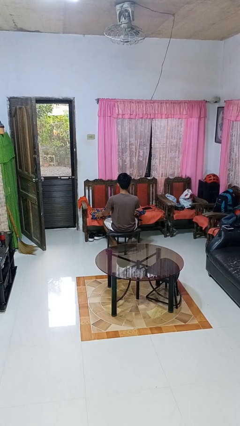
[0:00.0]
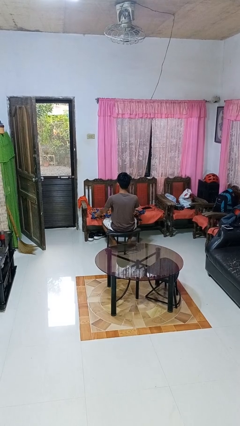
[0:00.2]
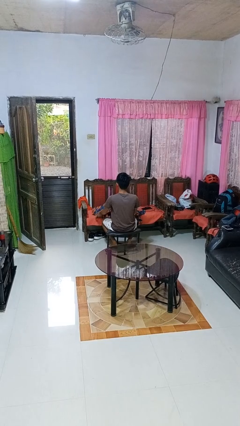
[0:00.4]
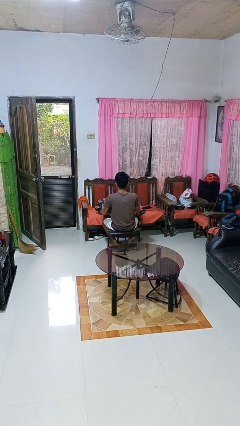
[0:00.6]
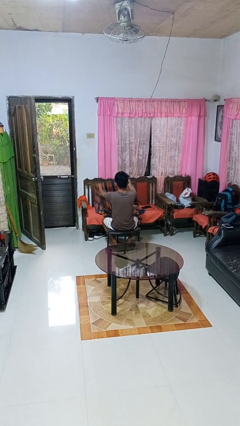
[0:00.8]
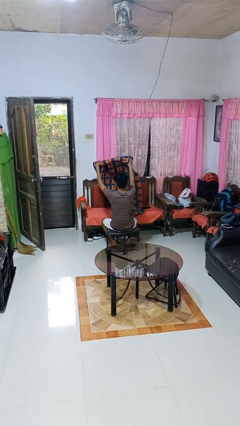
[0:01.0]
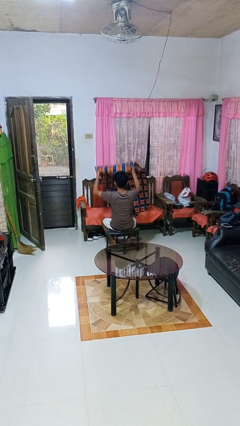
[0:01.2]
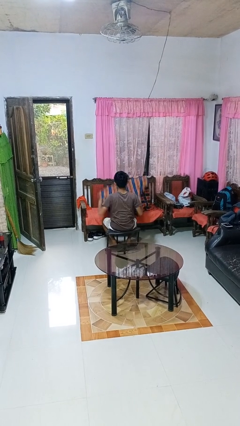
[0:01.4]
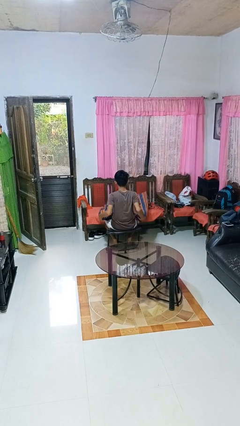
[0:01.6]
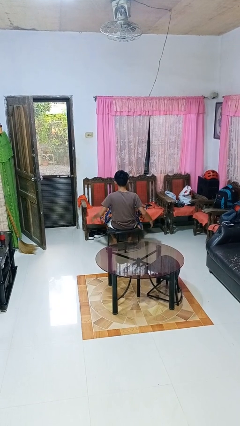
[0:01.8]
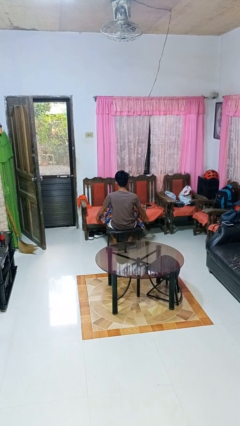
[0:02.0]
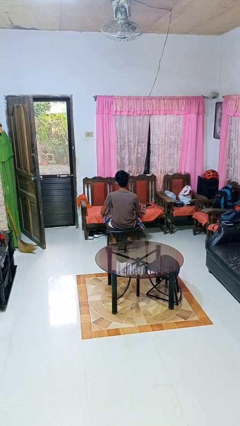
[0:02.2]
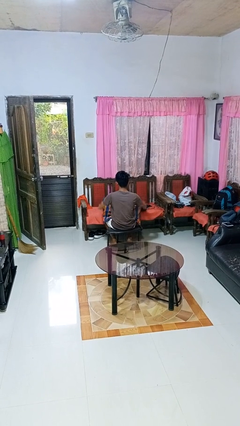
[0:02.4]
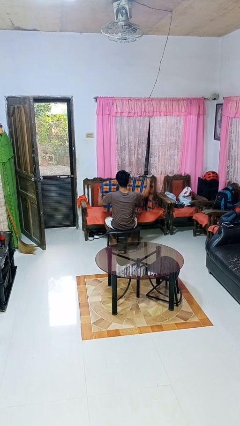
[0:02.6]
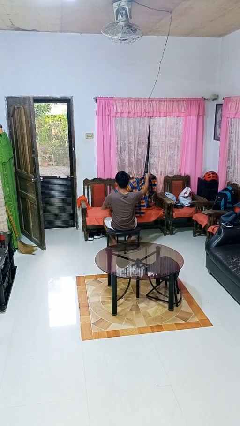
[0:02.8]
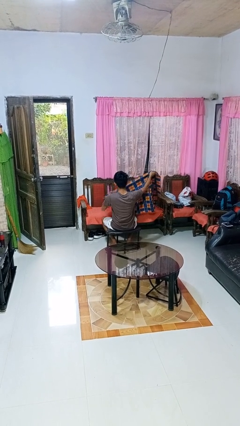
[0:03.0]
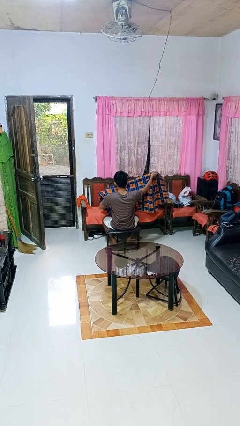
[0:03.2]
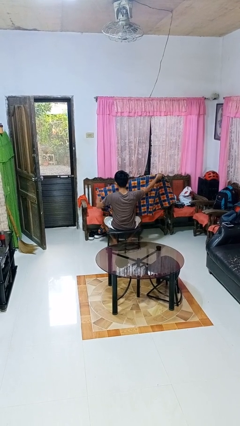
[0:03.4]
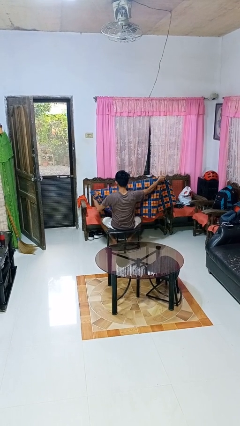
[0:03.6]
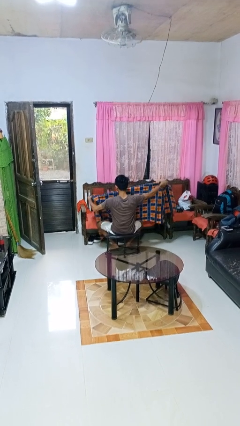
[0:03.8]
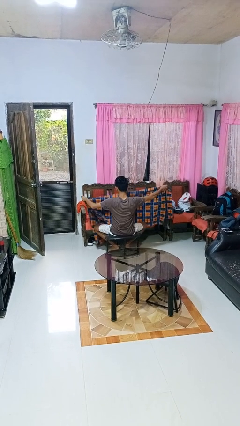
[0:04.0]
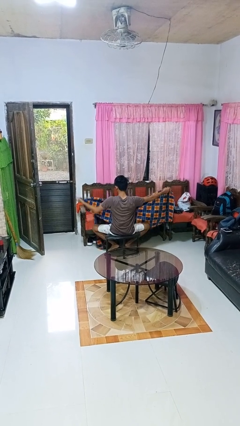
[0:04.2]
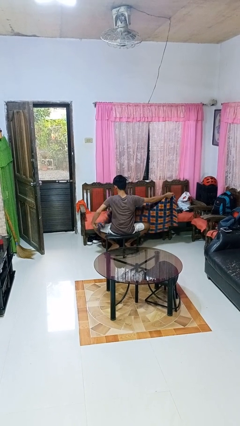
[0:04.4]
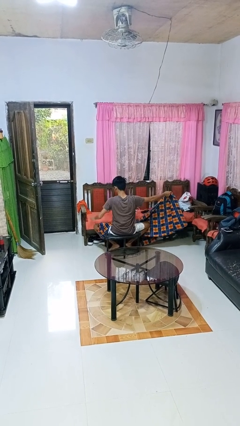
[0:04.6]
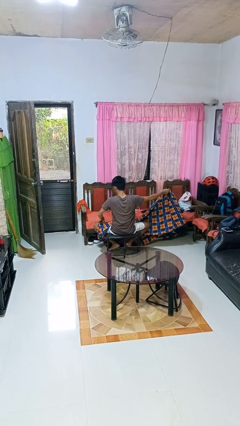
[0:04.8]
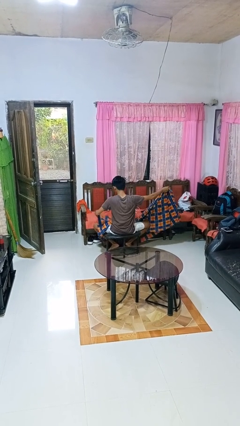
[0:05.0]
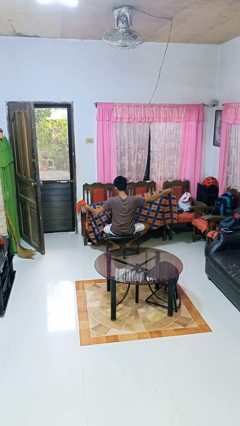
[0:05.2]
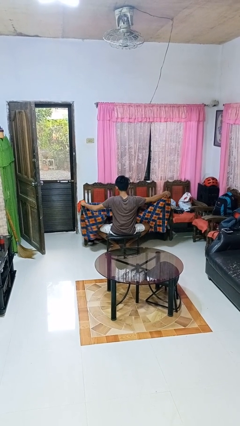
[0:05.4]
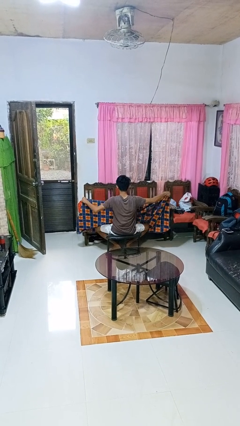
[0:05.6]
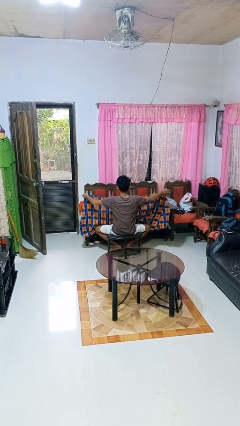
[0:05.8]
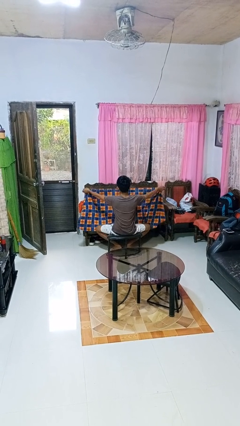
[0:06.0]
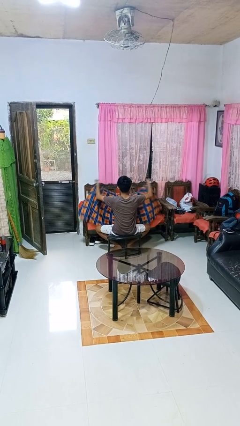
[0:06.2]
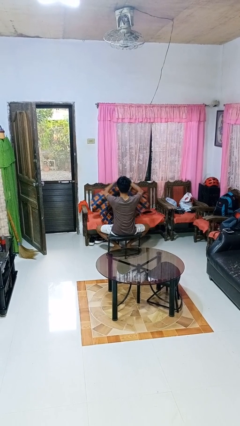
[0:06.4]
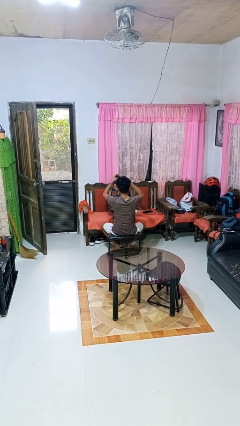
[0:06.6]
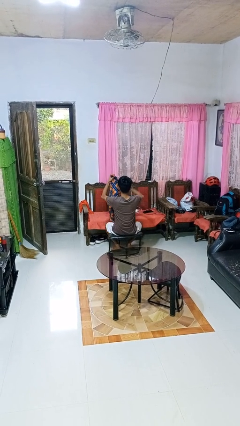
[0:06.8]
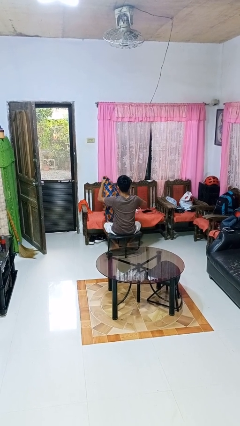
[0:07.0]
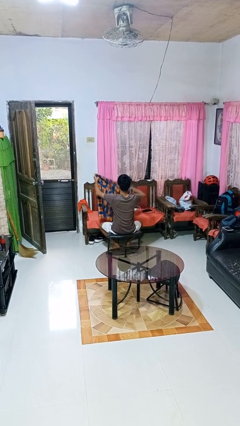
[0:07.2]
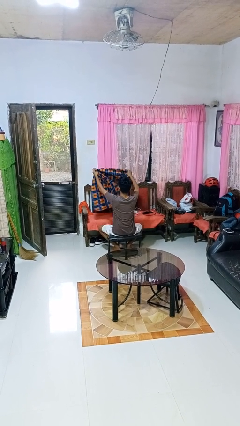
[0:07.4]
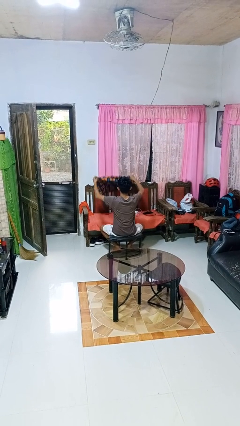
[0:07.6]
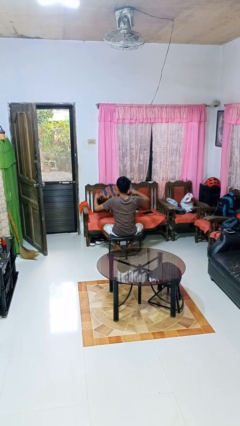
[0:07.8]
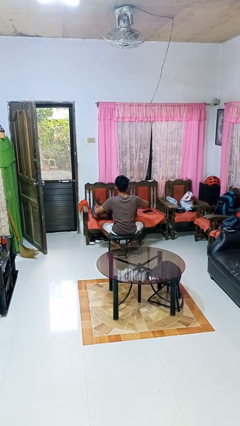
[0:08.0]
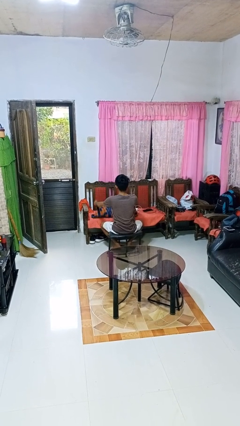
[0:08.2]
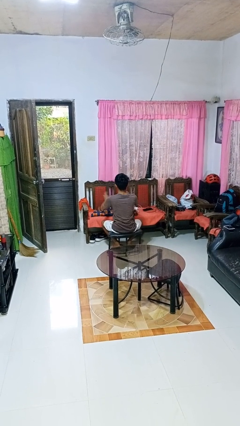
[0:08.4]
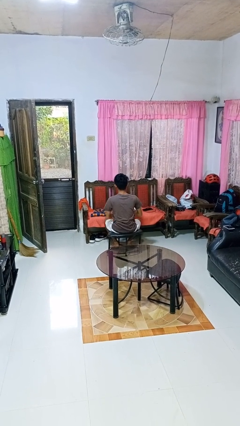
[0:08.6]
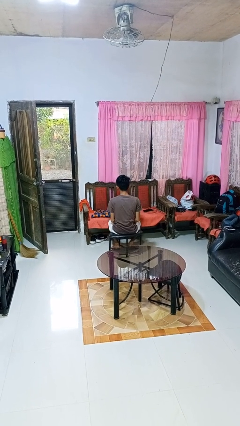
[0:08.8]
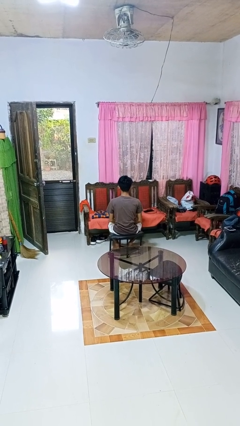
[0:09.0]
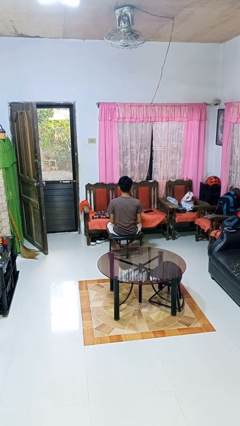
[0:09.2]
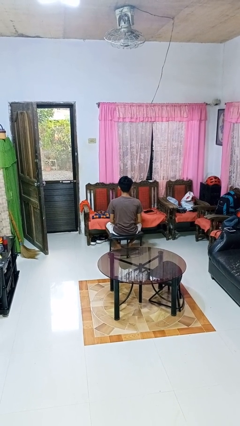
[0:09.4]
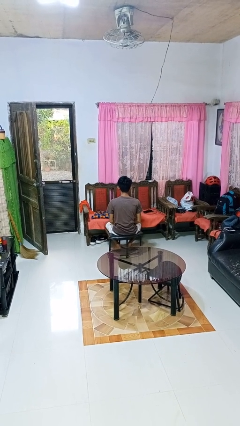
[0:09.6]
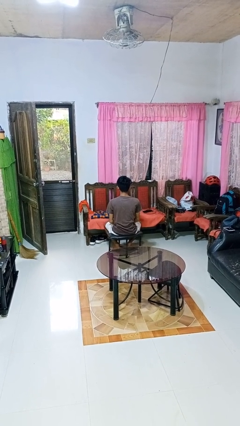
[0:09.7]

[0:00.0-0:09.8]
person folds blanket

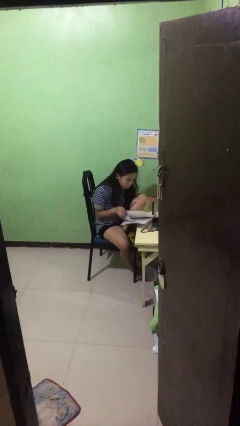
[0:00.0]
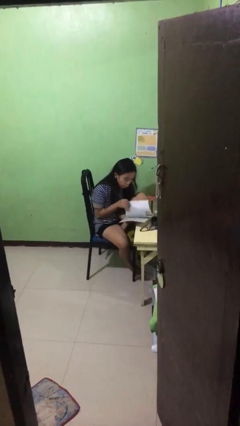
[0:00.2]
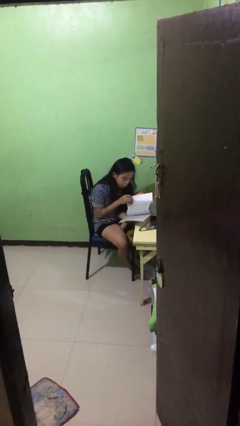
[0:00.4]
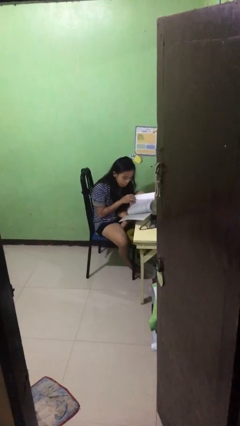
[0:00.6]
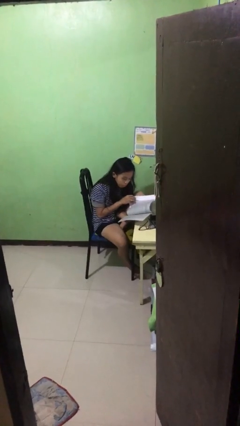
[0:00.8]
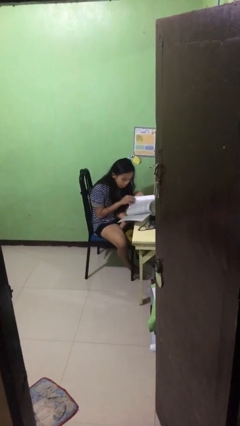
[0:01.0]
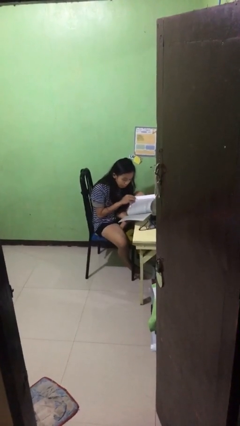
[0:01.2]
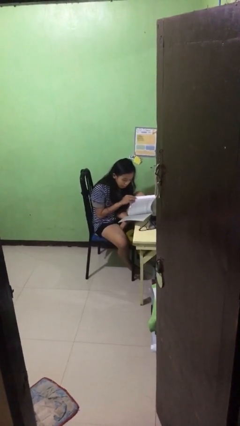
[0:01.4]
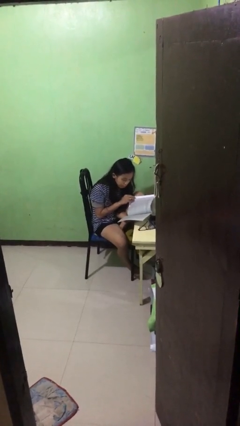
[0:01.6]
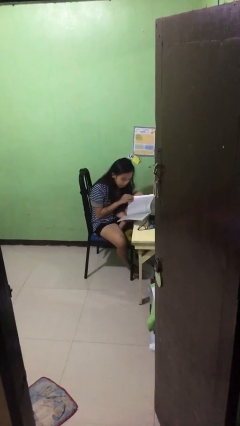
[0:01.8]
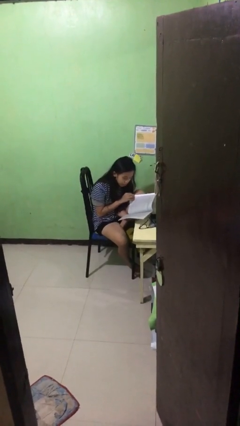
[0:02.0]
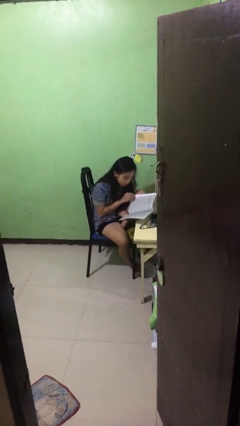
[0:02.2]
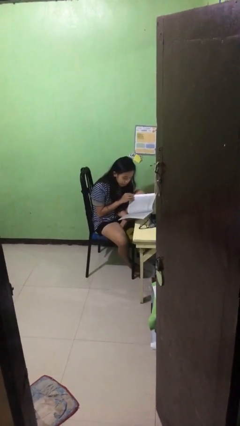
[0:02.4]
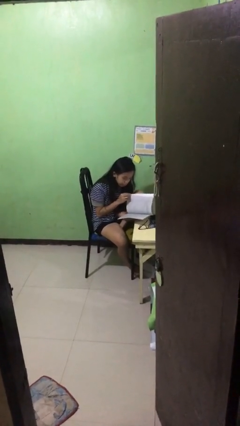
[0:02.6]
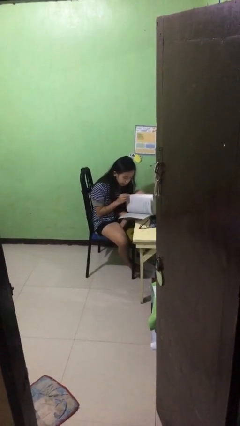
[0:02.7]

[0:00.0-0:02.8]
person reads document

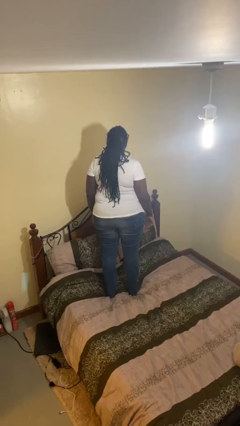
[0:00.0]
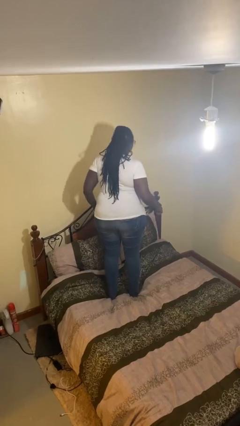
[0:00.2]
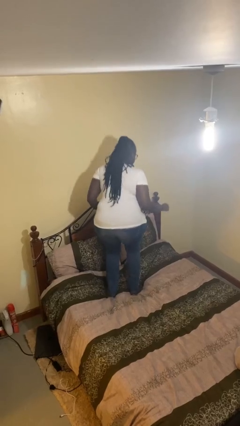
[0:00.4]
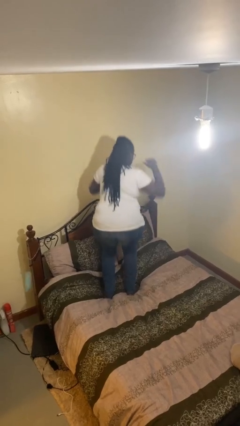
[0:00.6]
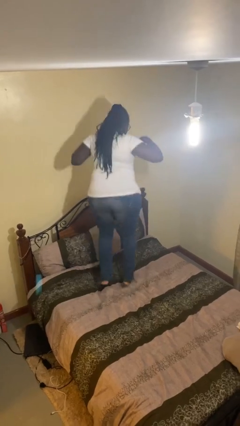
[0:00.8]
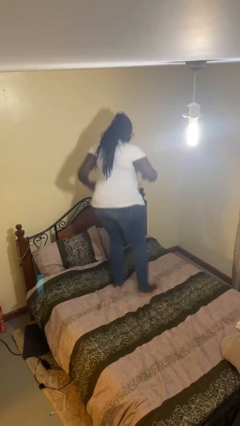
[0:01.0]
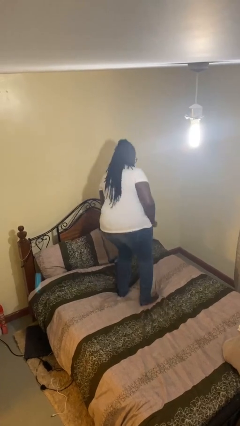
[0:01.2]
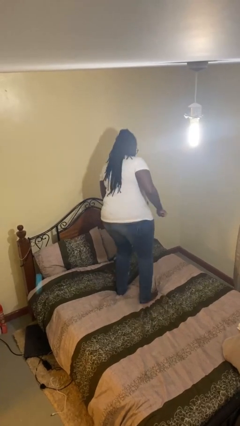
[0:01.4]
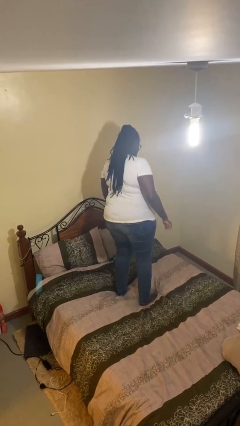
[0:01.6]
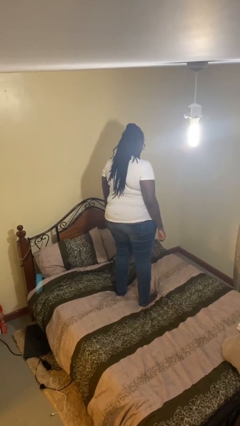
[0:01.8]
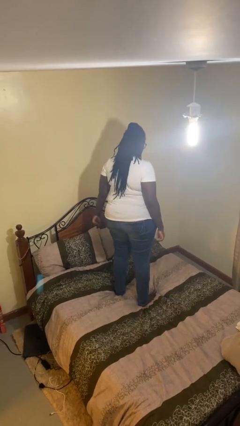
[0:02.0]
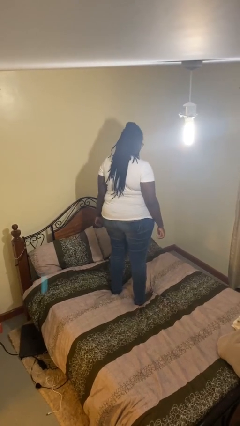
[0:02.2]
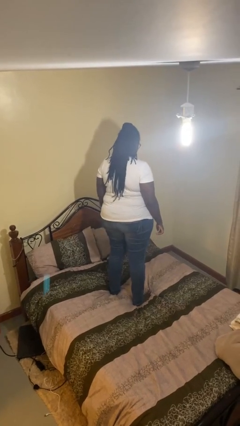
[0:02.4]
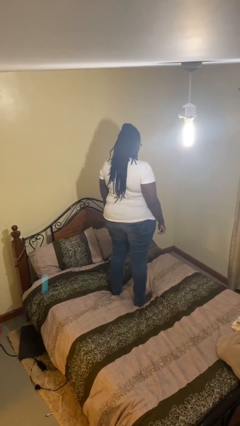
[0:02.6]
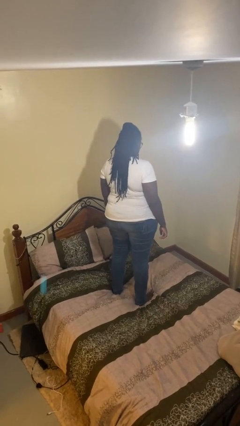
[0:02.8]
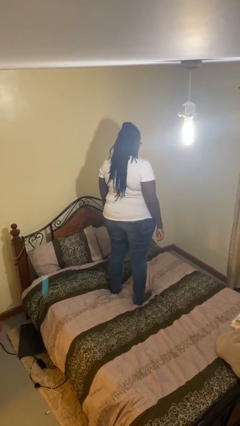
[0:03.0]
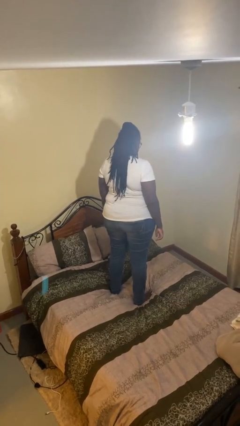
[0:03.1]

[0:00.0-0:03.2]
person jumps on bed

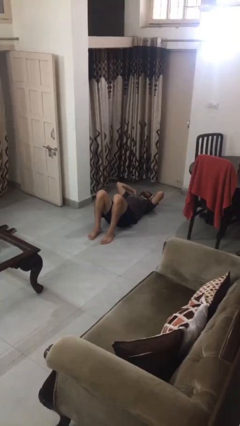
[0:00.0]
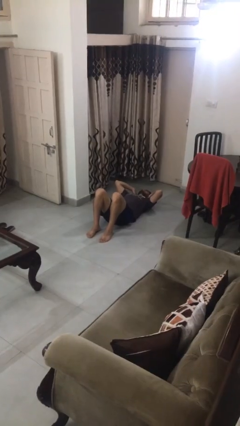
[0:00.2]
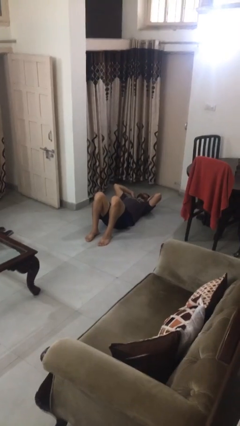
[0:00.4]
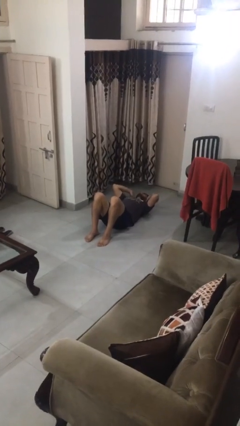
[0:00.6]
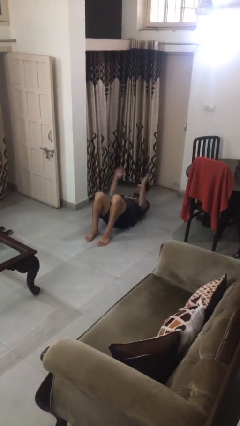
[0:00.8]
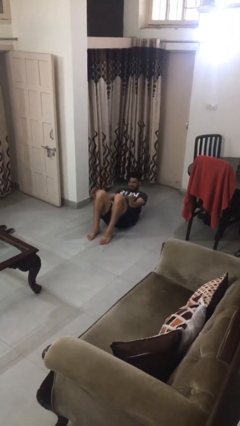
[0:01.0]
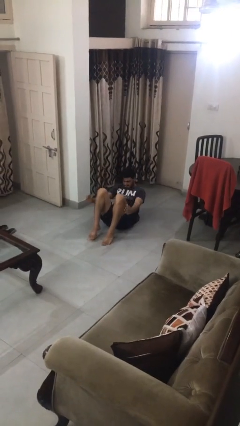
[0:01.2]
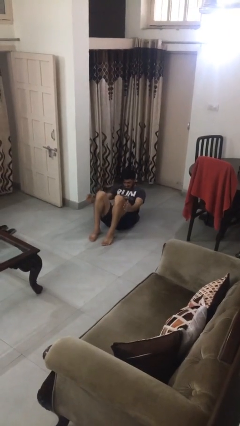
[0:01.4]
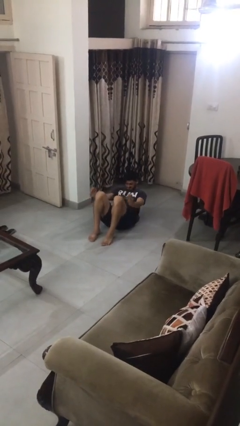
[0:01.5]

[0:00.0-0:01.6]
person exercises with situp
